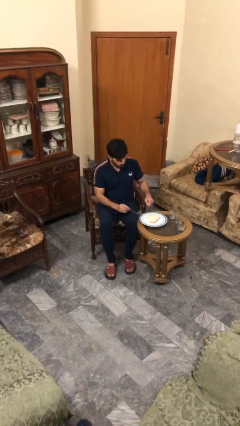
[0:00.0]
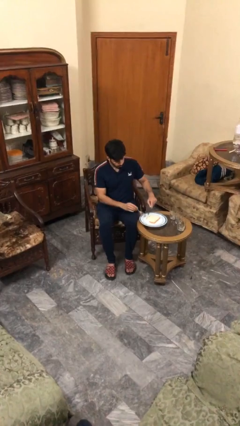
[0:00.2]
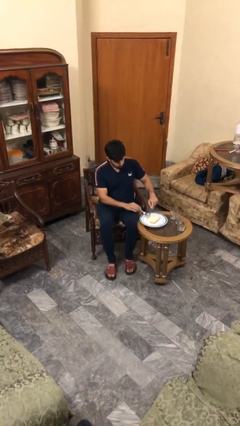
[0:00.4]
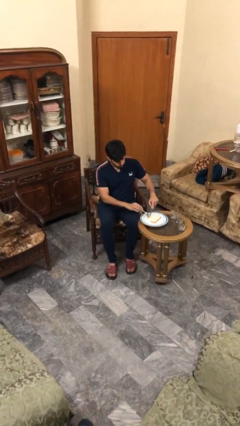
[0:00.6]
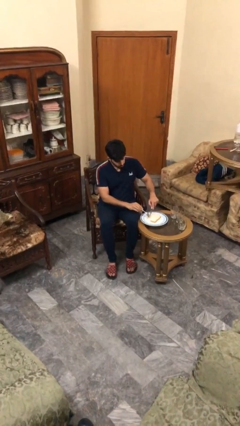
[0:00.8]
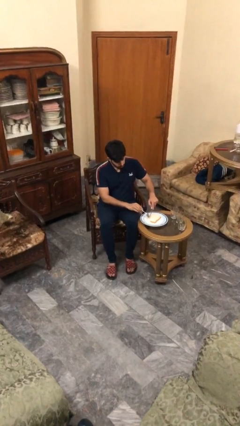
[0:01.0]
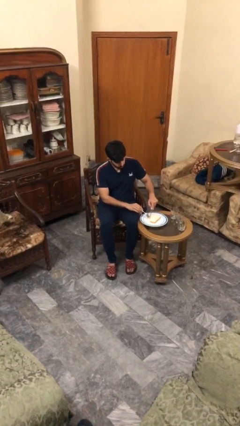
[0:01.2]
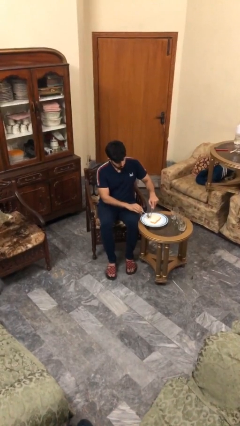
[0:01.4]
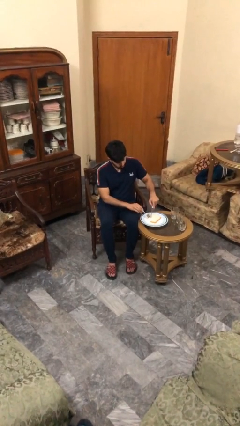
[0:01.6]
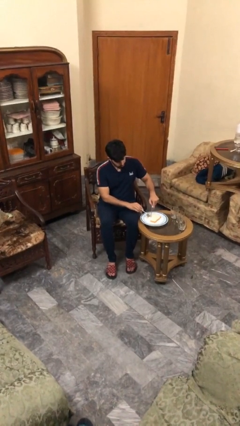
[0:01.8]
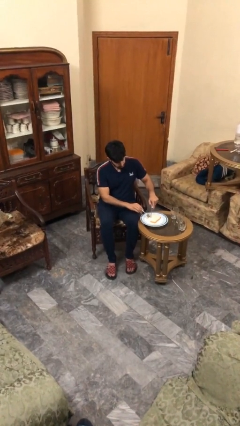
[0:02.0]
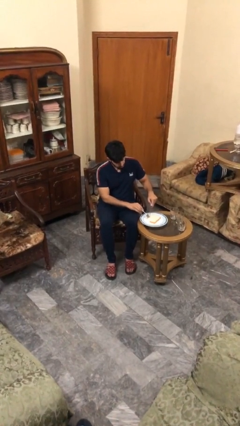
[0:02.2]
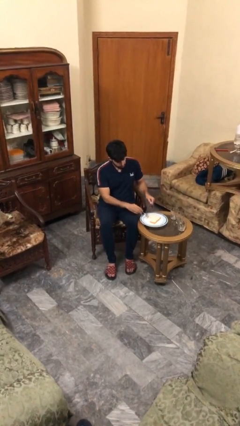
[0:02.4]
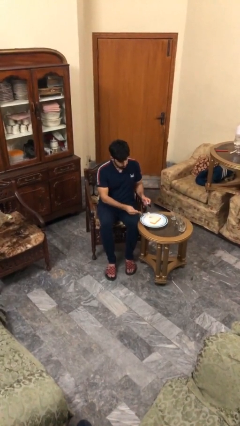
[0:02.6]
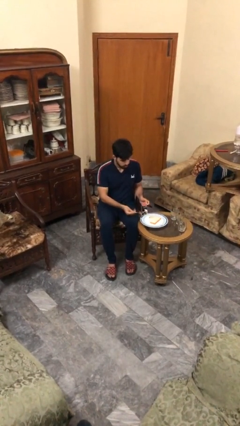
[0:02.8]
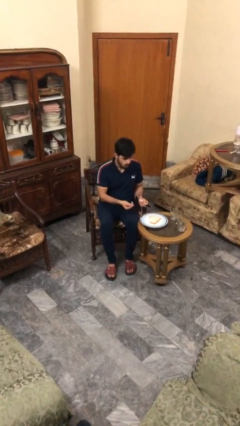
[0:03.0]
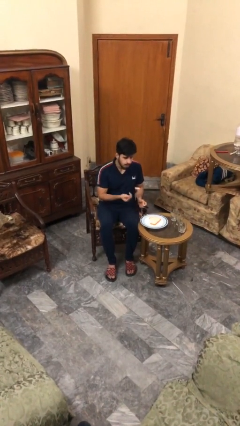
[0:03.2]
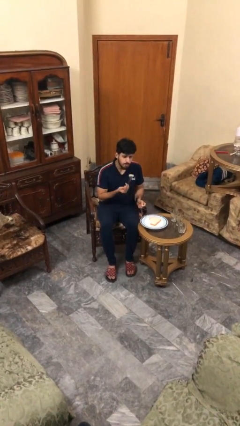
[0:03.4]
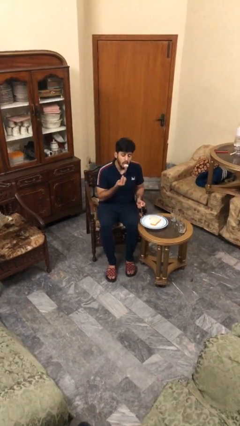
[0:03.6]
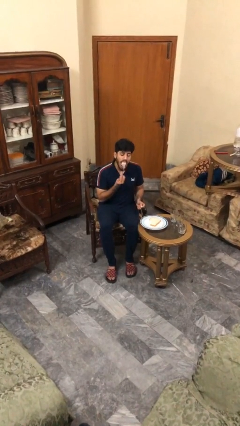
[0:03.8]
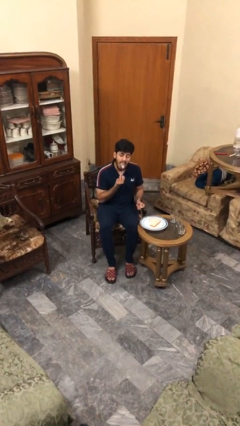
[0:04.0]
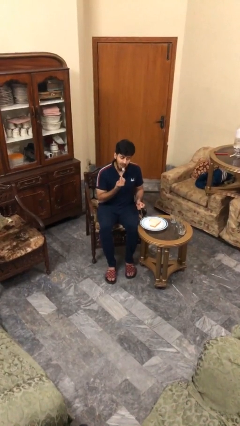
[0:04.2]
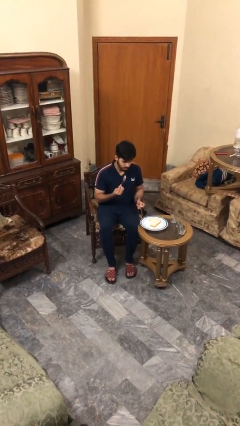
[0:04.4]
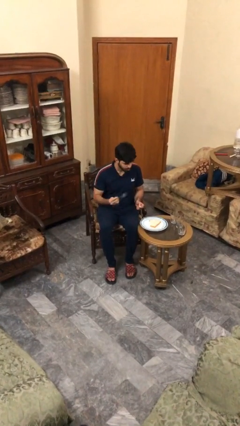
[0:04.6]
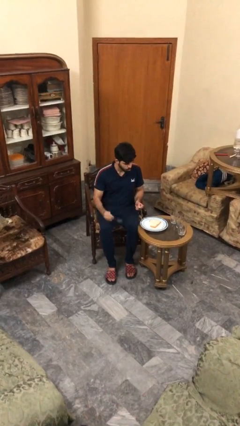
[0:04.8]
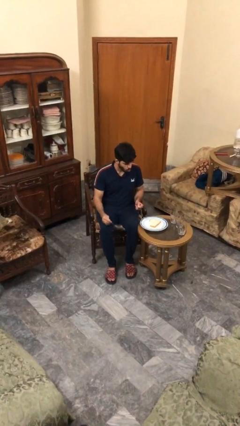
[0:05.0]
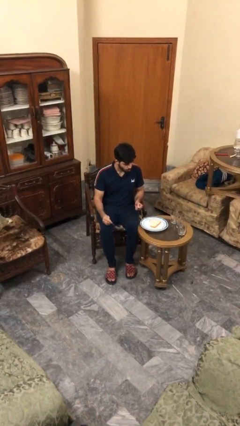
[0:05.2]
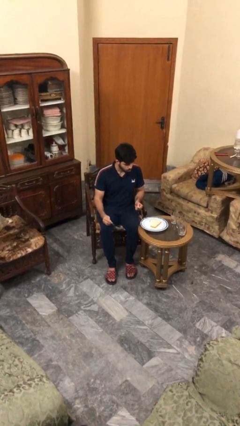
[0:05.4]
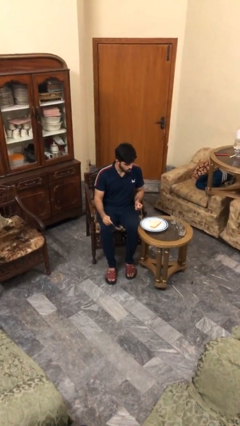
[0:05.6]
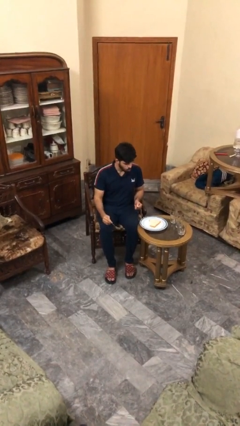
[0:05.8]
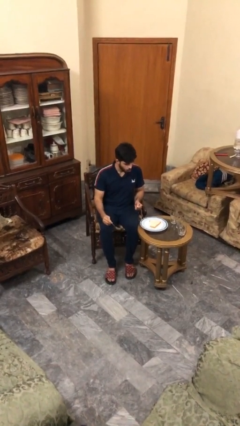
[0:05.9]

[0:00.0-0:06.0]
person eats with utensil

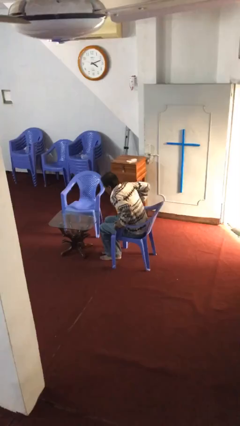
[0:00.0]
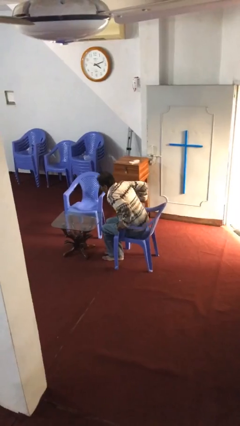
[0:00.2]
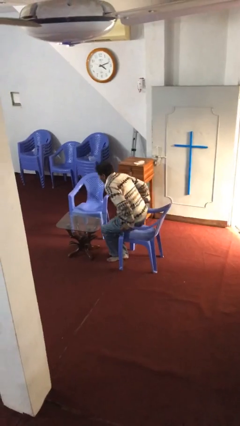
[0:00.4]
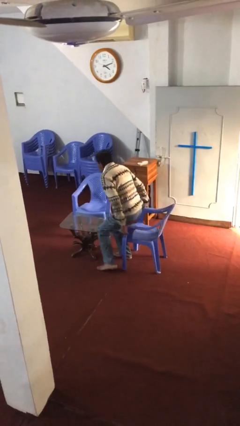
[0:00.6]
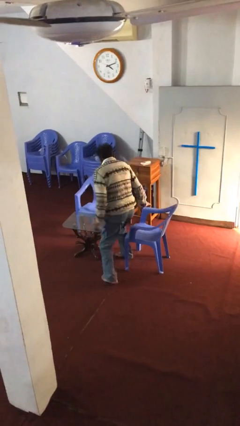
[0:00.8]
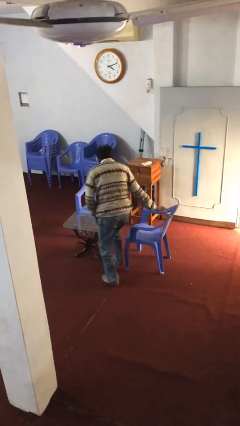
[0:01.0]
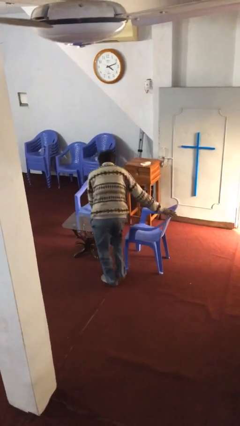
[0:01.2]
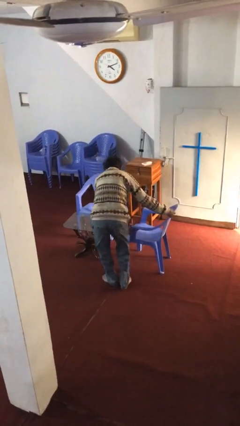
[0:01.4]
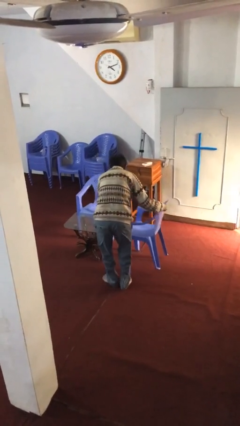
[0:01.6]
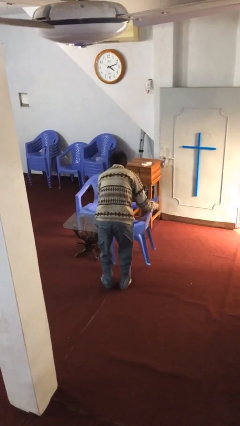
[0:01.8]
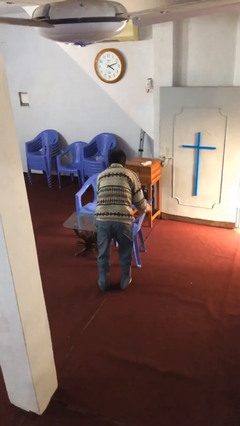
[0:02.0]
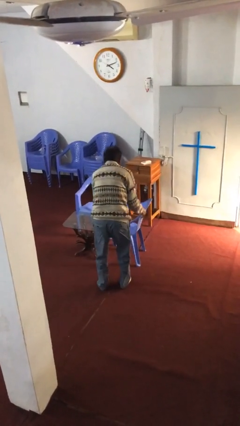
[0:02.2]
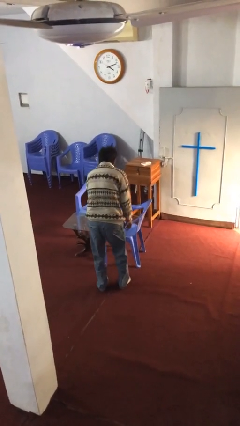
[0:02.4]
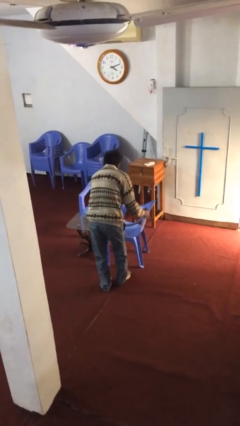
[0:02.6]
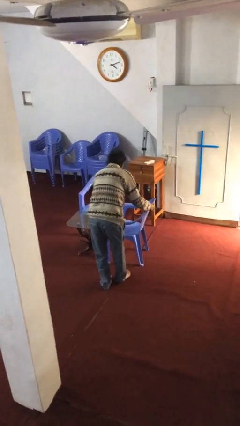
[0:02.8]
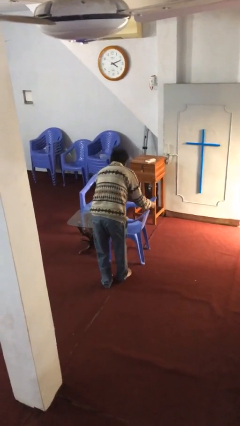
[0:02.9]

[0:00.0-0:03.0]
person stands up

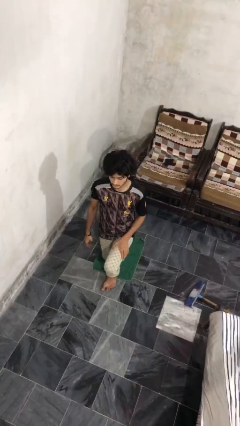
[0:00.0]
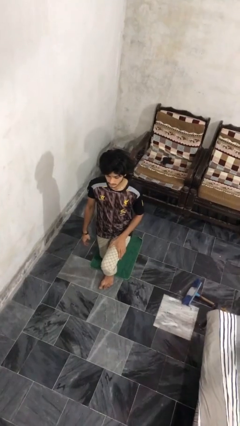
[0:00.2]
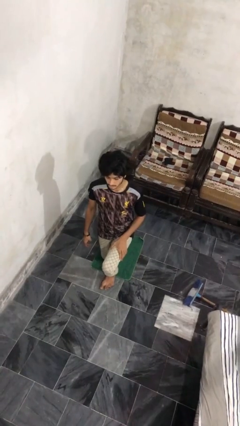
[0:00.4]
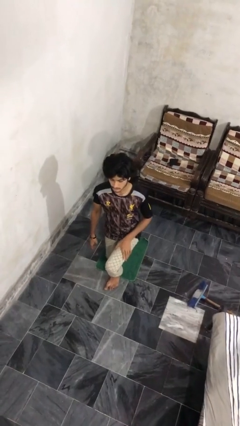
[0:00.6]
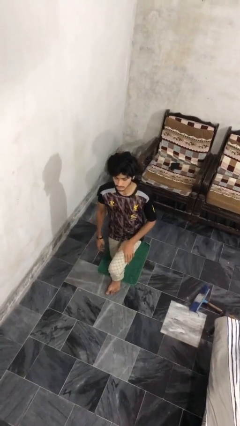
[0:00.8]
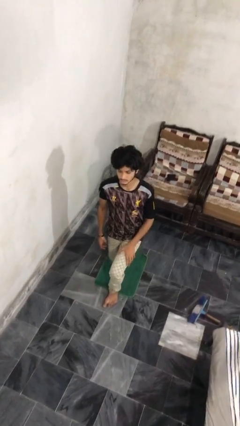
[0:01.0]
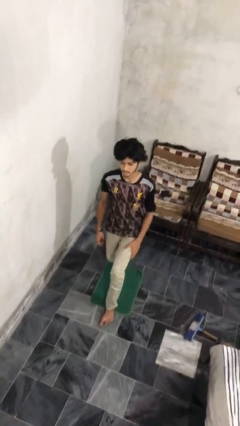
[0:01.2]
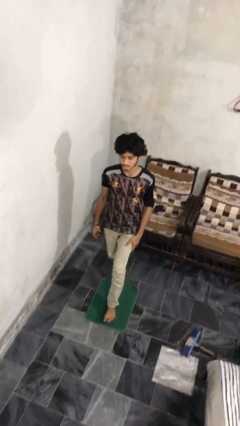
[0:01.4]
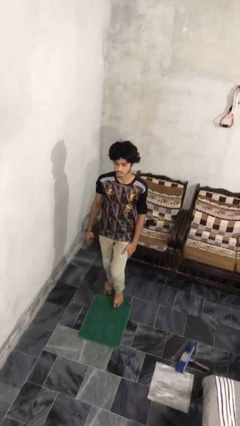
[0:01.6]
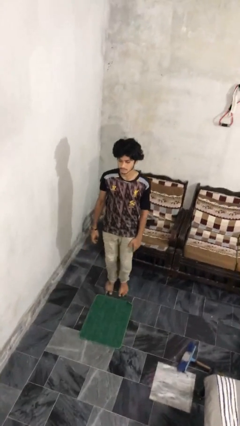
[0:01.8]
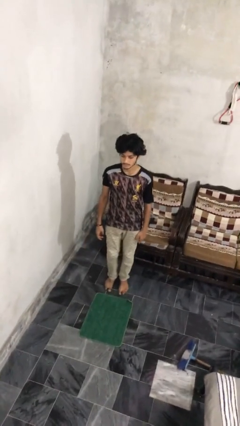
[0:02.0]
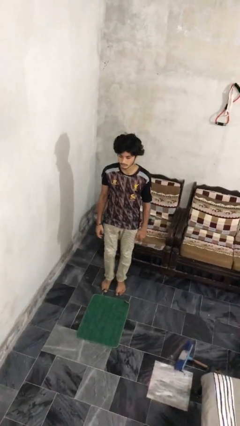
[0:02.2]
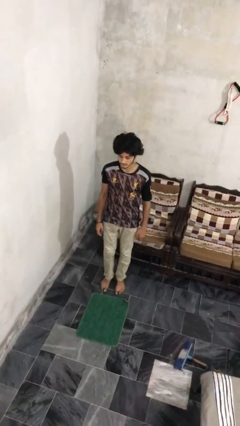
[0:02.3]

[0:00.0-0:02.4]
person stands up from floor

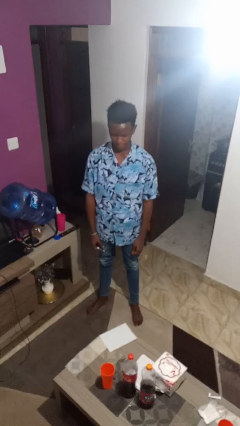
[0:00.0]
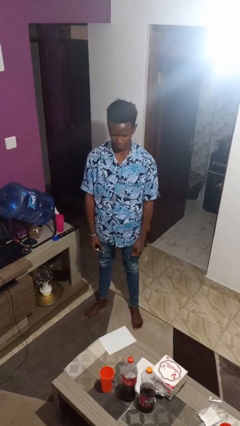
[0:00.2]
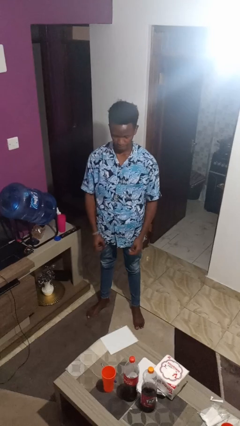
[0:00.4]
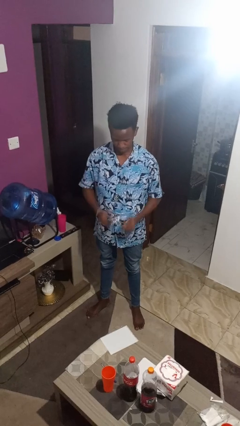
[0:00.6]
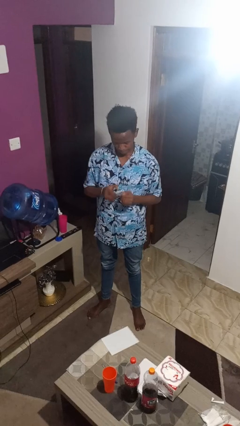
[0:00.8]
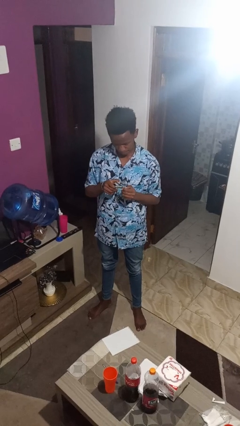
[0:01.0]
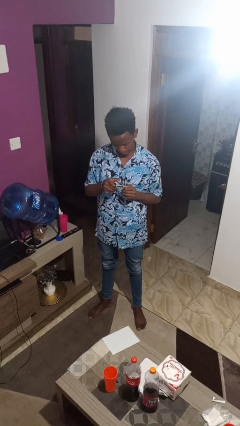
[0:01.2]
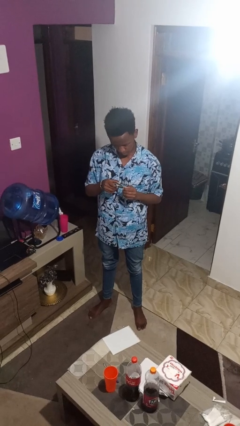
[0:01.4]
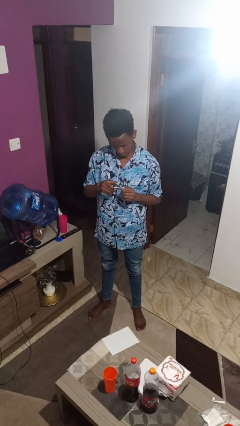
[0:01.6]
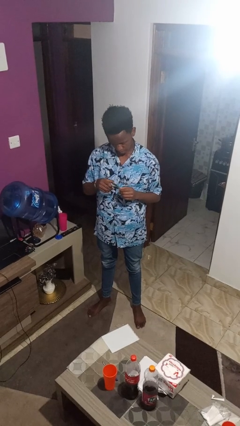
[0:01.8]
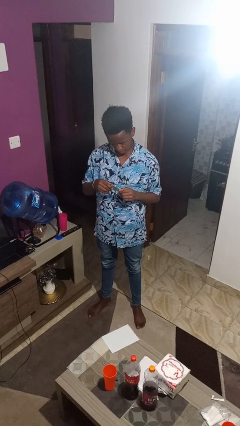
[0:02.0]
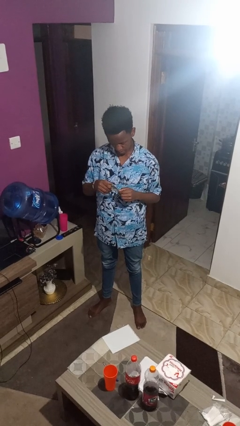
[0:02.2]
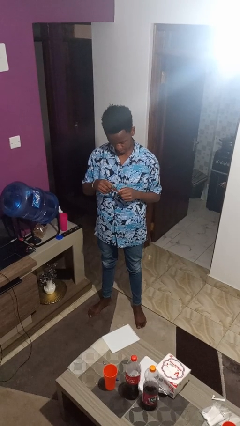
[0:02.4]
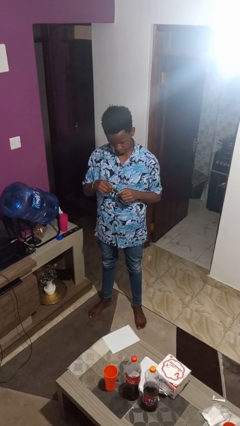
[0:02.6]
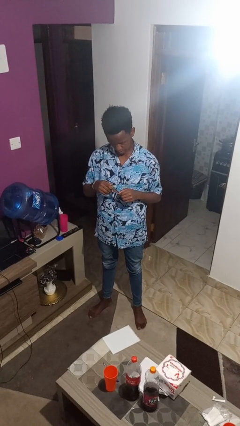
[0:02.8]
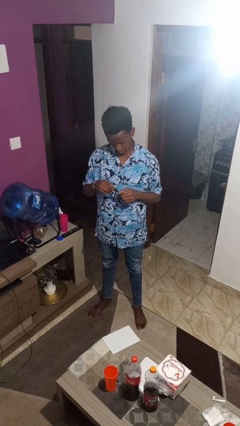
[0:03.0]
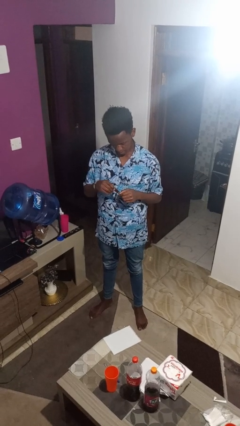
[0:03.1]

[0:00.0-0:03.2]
person clips fingernails

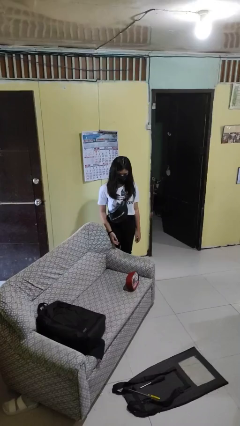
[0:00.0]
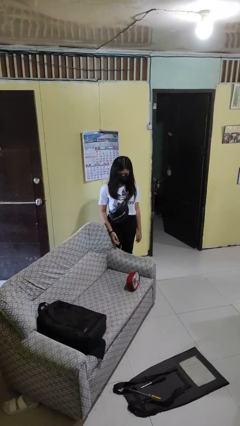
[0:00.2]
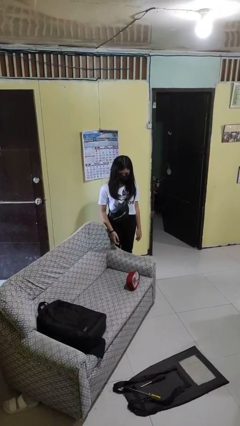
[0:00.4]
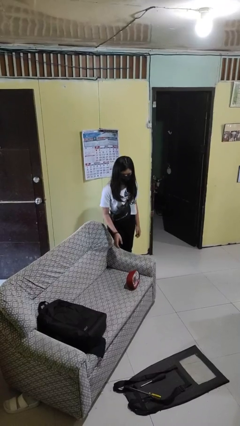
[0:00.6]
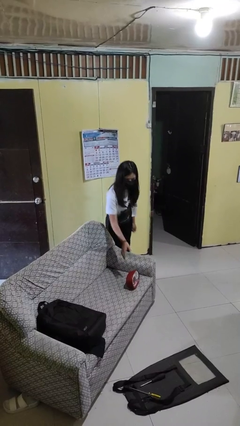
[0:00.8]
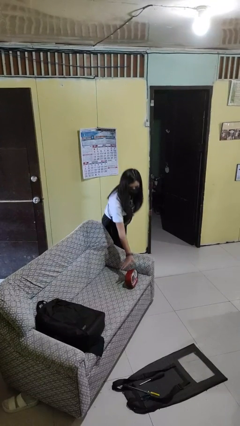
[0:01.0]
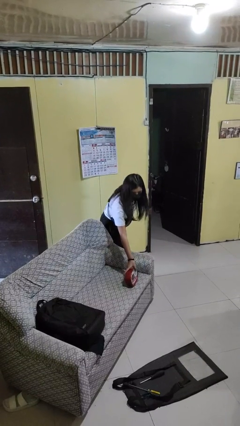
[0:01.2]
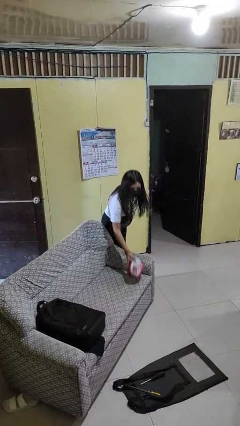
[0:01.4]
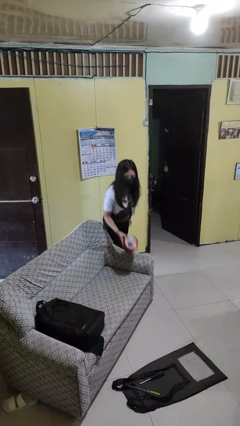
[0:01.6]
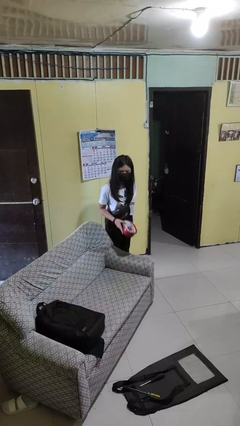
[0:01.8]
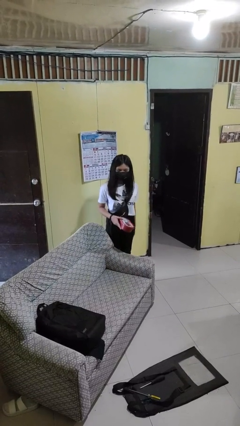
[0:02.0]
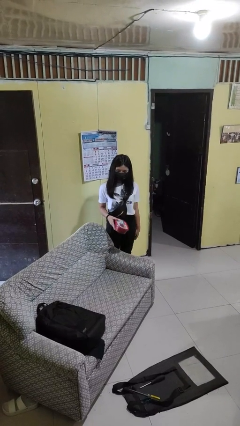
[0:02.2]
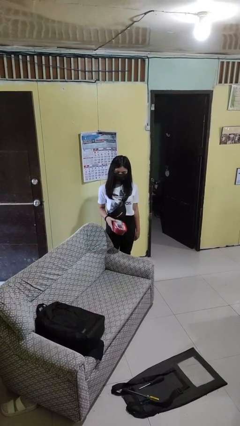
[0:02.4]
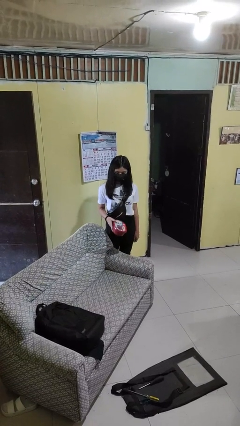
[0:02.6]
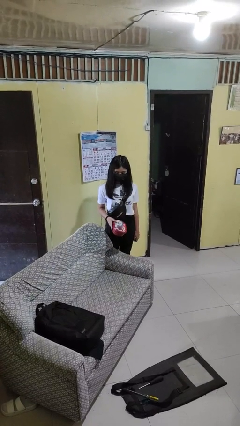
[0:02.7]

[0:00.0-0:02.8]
person picks up object from couch
